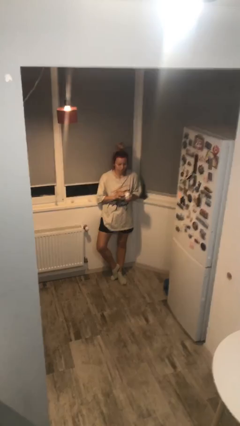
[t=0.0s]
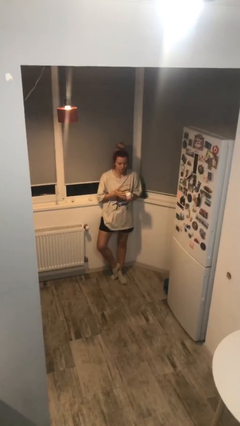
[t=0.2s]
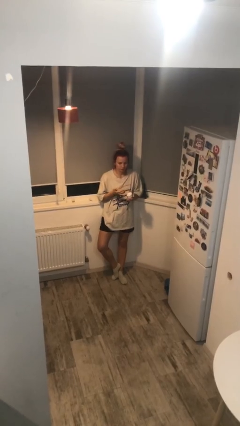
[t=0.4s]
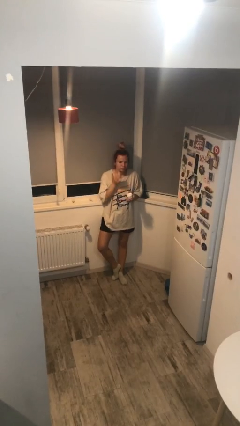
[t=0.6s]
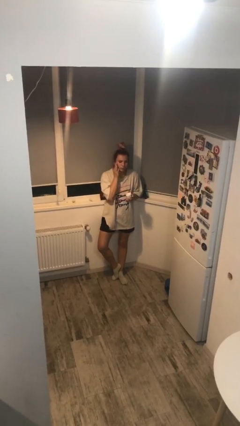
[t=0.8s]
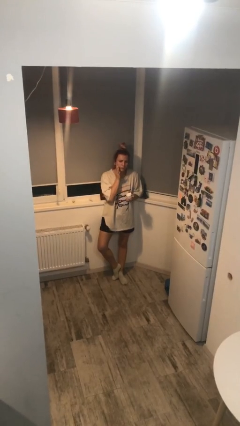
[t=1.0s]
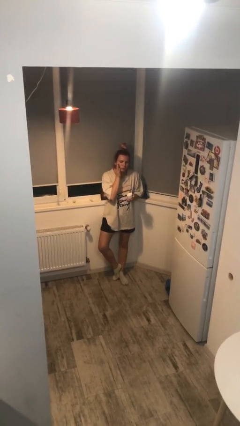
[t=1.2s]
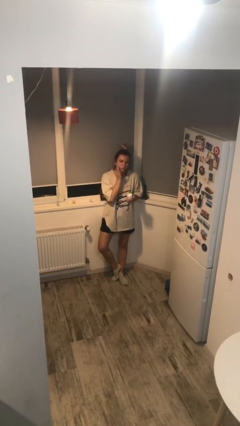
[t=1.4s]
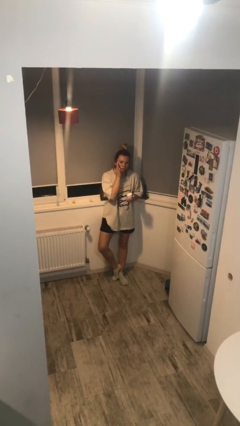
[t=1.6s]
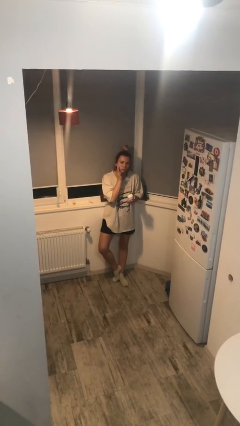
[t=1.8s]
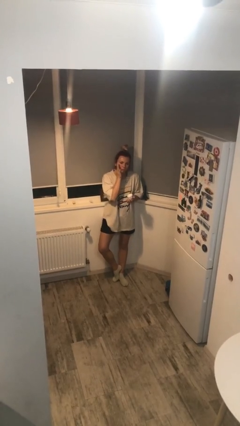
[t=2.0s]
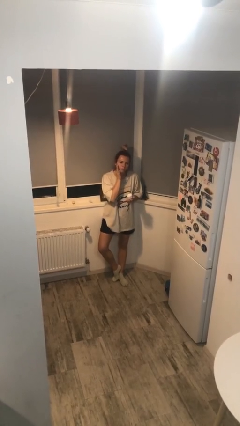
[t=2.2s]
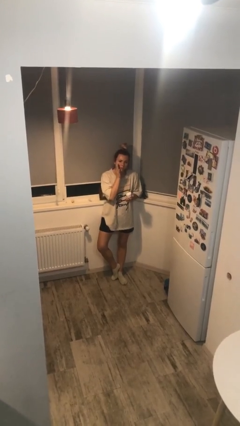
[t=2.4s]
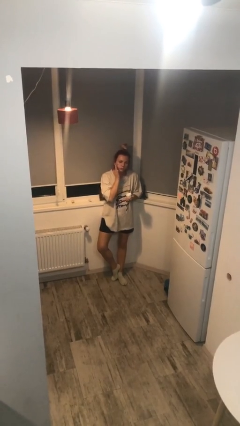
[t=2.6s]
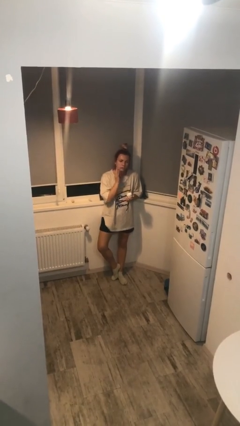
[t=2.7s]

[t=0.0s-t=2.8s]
person applies facial moisturizer

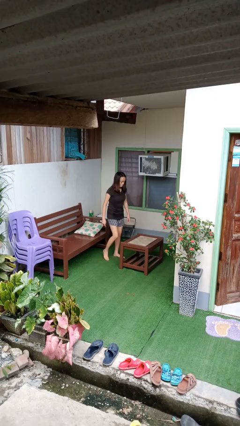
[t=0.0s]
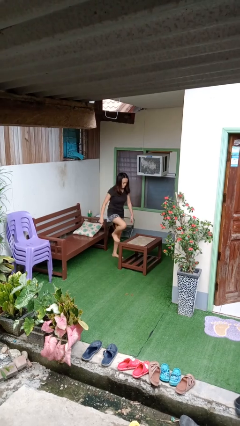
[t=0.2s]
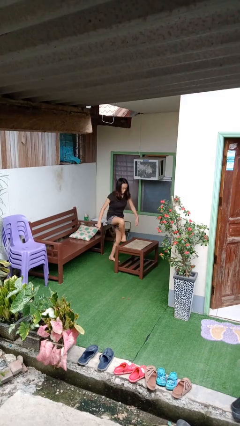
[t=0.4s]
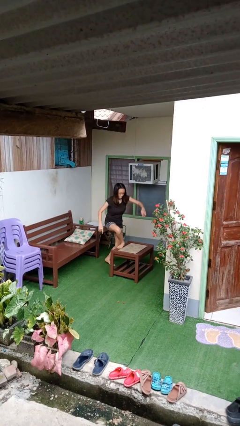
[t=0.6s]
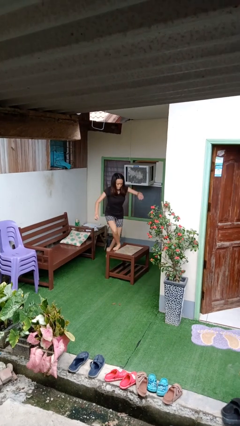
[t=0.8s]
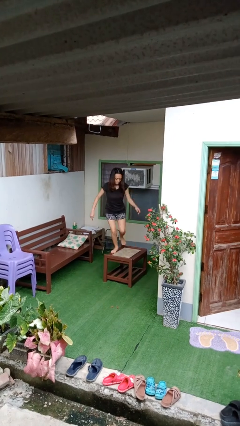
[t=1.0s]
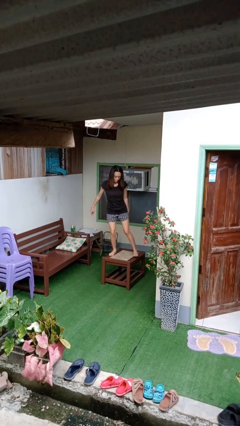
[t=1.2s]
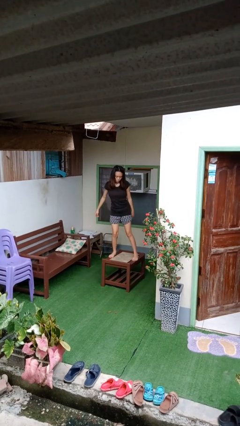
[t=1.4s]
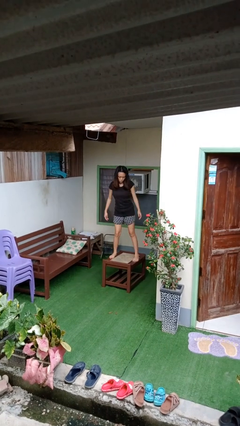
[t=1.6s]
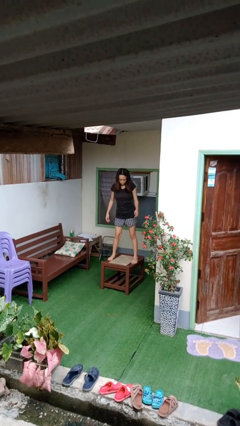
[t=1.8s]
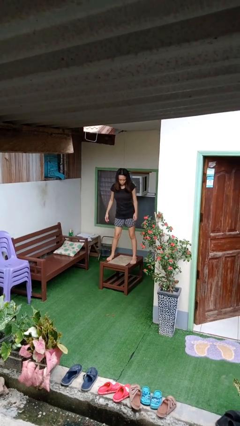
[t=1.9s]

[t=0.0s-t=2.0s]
person climbs on table

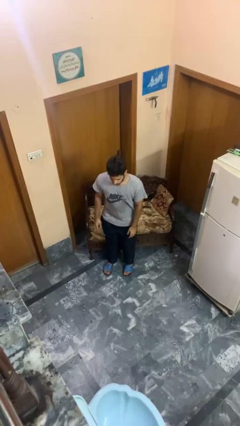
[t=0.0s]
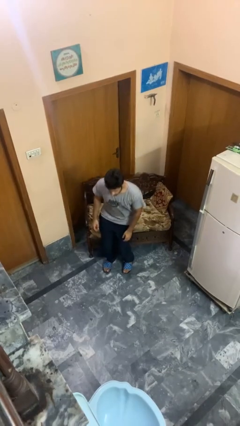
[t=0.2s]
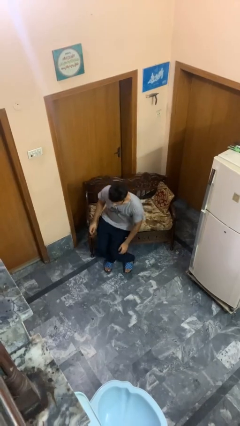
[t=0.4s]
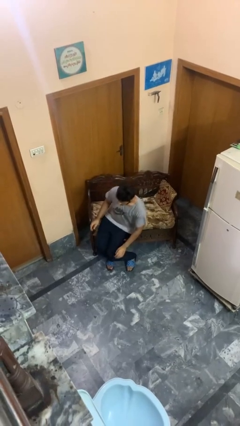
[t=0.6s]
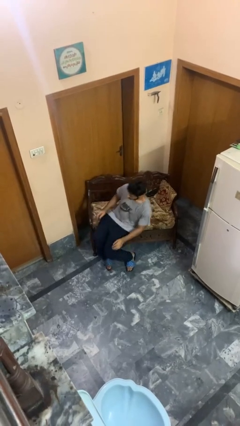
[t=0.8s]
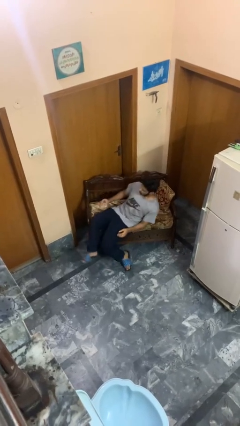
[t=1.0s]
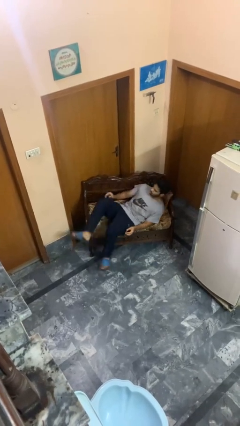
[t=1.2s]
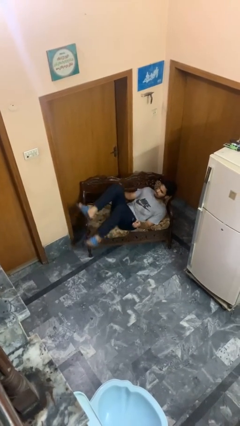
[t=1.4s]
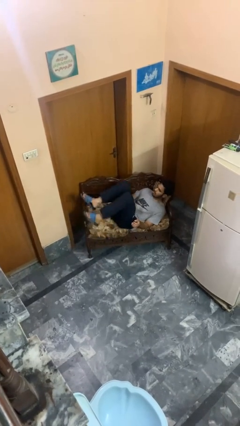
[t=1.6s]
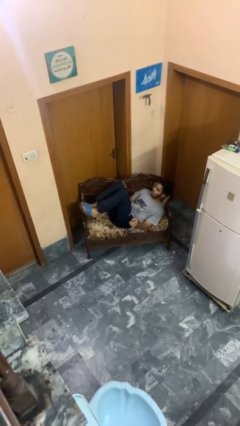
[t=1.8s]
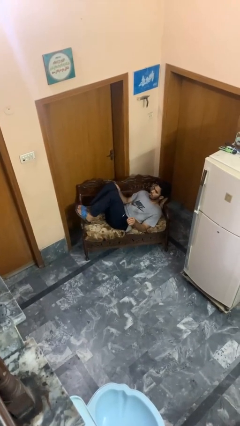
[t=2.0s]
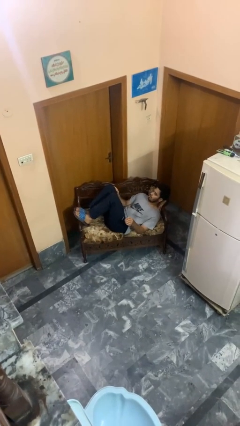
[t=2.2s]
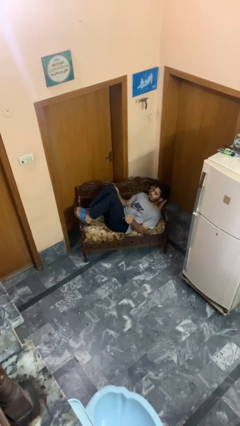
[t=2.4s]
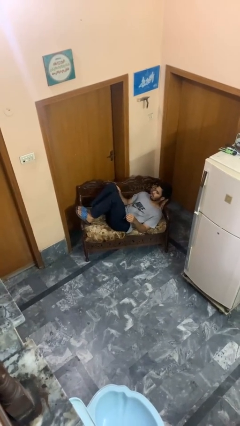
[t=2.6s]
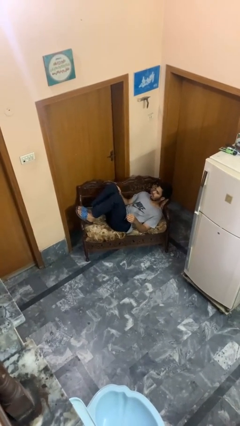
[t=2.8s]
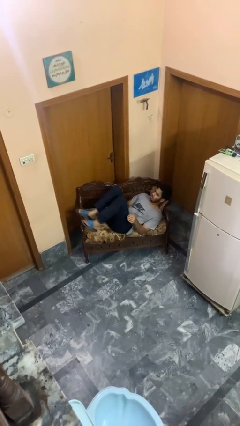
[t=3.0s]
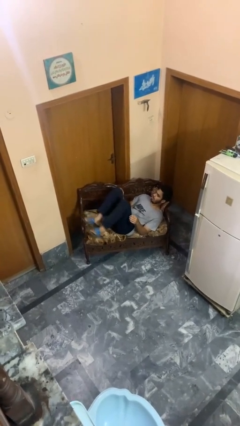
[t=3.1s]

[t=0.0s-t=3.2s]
person lies down on couch

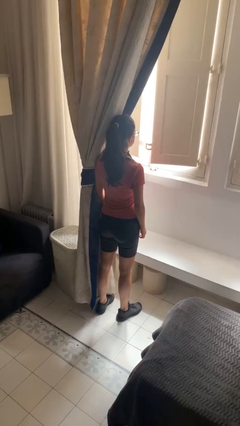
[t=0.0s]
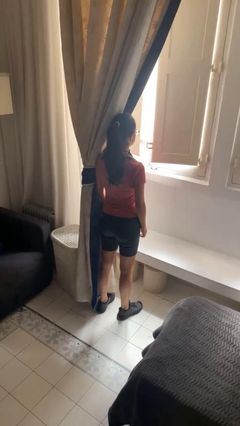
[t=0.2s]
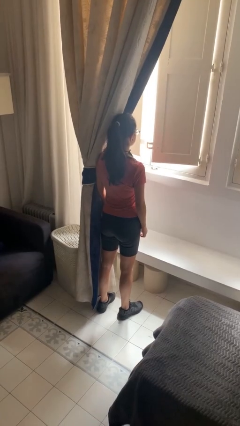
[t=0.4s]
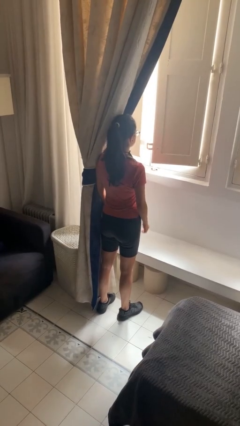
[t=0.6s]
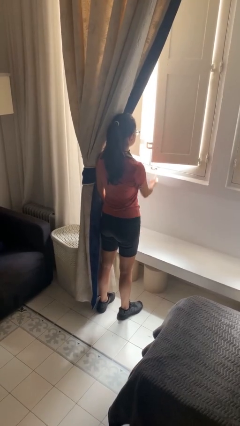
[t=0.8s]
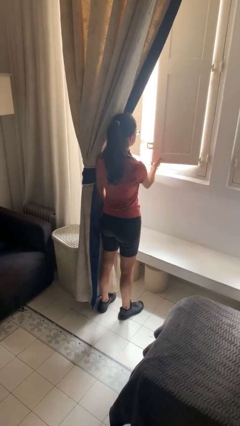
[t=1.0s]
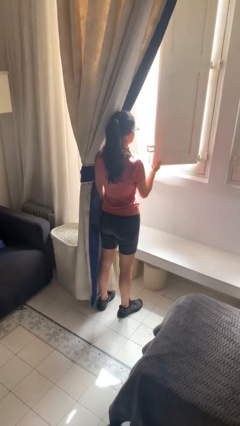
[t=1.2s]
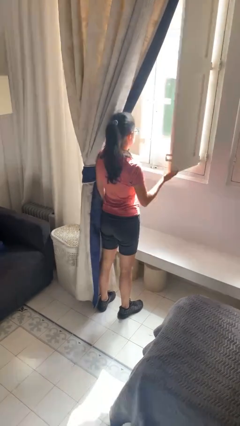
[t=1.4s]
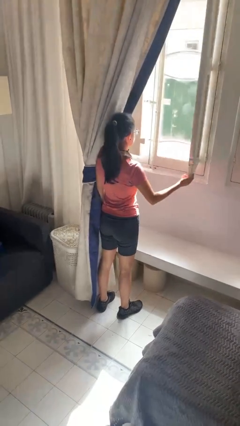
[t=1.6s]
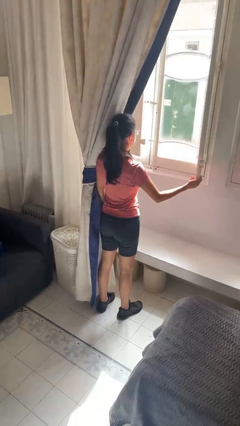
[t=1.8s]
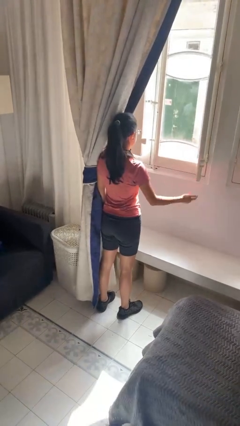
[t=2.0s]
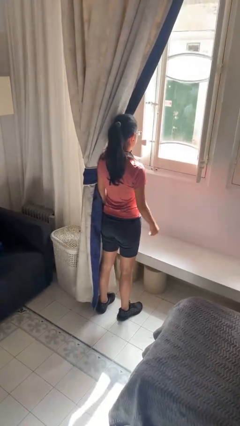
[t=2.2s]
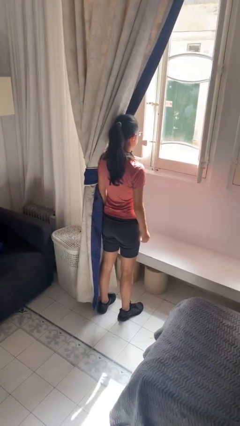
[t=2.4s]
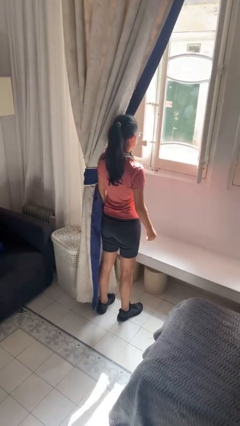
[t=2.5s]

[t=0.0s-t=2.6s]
person opens home window

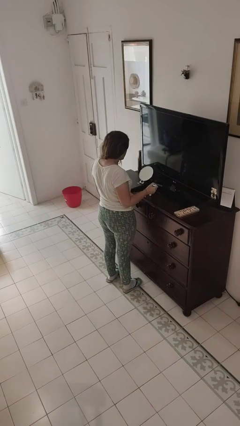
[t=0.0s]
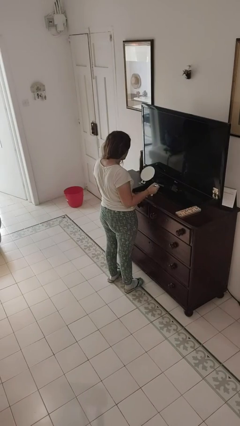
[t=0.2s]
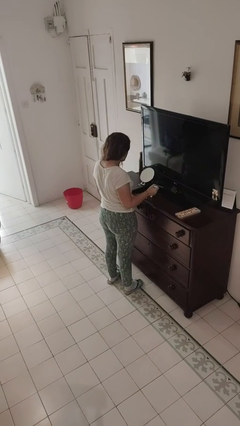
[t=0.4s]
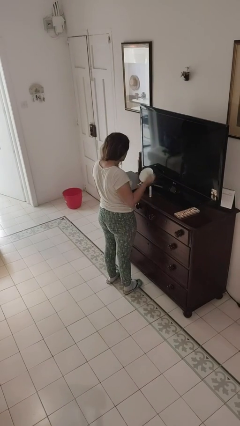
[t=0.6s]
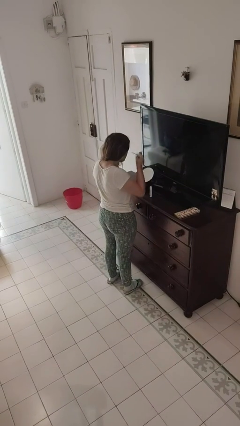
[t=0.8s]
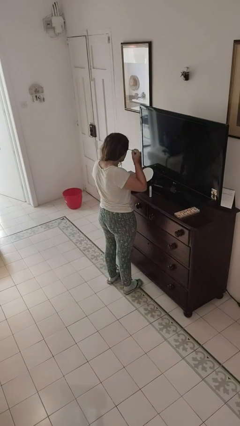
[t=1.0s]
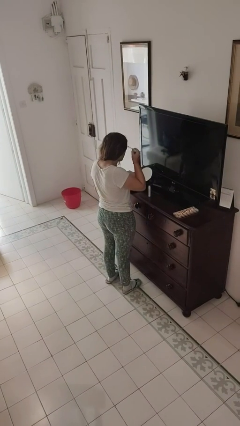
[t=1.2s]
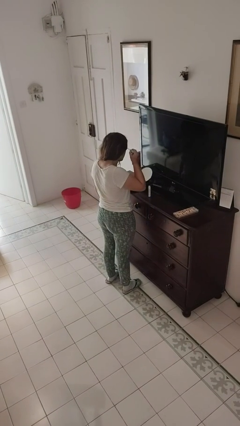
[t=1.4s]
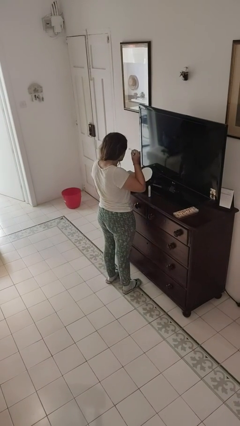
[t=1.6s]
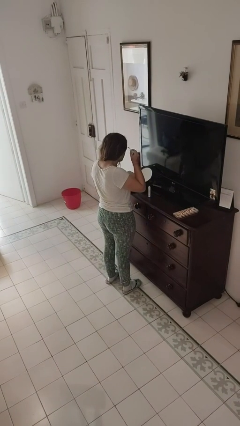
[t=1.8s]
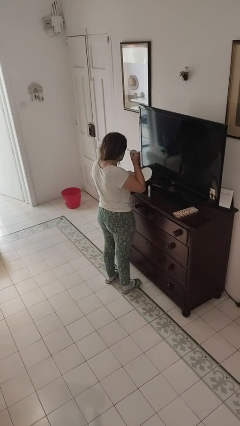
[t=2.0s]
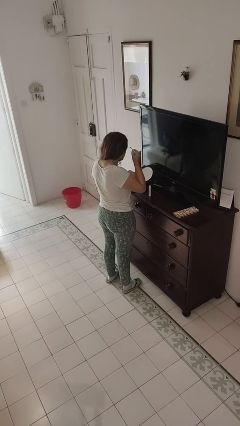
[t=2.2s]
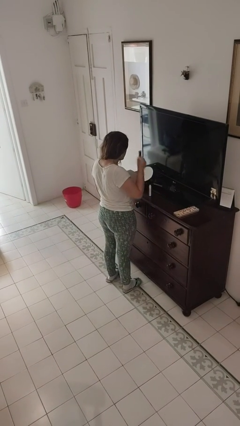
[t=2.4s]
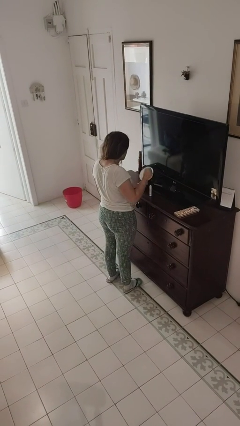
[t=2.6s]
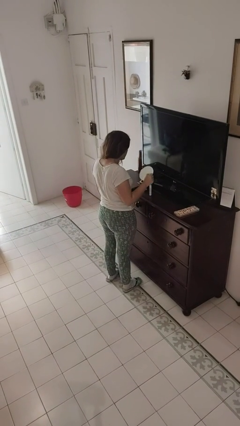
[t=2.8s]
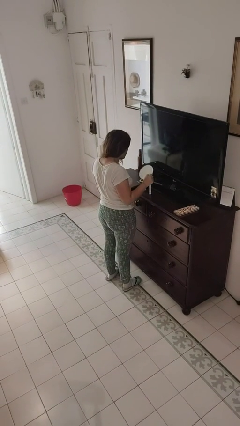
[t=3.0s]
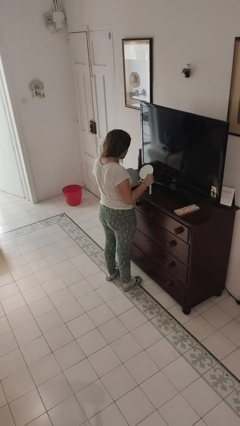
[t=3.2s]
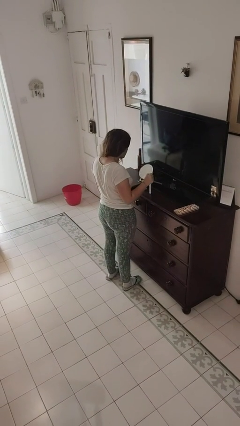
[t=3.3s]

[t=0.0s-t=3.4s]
person applies eye makeup

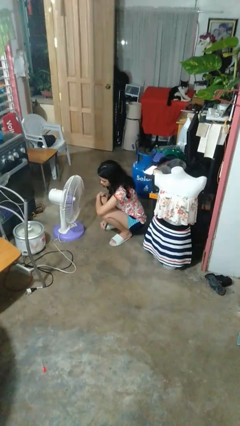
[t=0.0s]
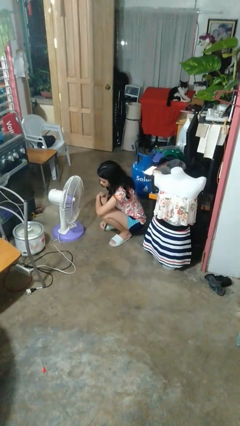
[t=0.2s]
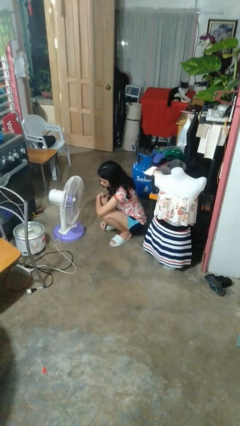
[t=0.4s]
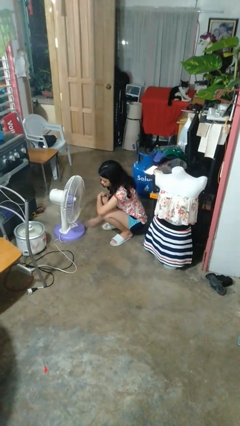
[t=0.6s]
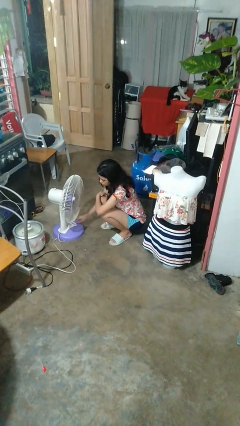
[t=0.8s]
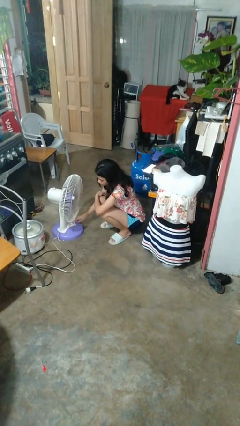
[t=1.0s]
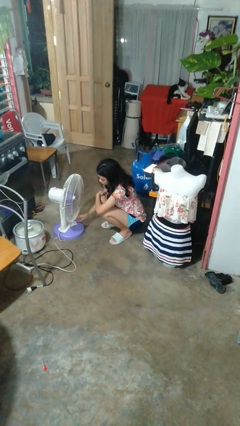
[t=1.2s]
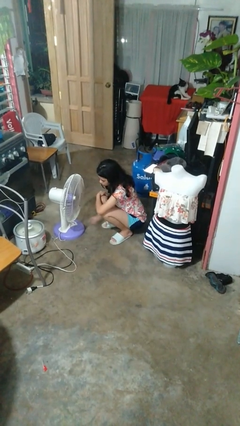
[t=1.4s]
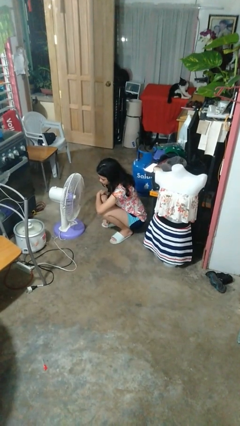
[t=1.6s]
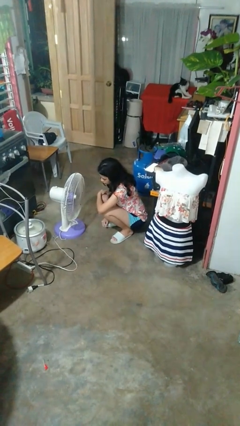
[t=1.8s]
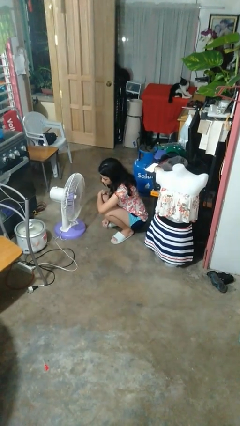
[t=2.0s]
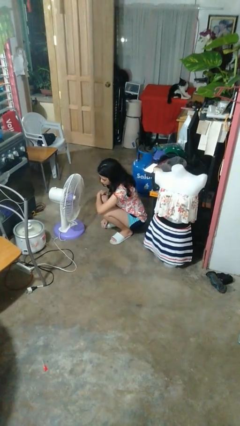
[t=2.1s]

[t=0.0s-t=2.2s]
person turns on fan

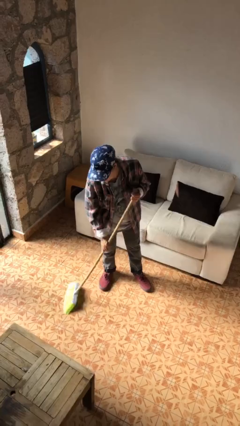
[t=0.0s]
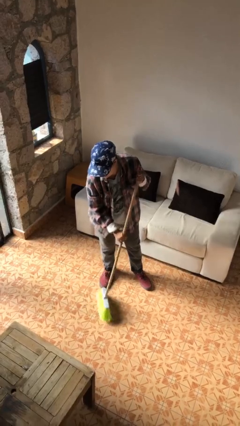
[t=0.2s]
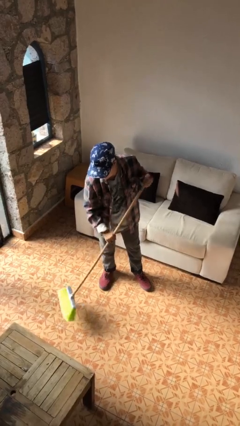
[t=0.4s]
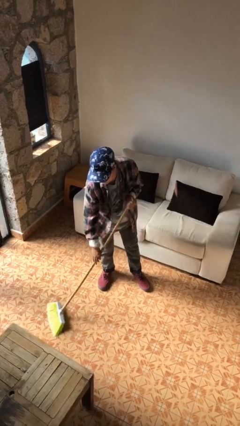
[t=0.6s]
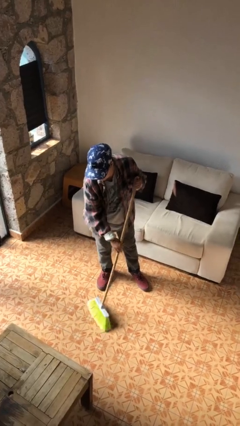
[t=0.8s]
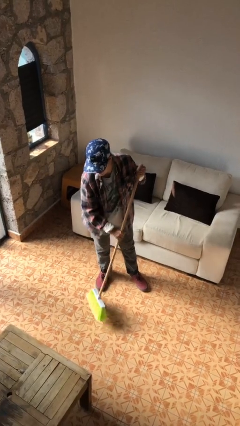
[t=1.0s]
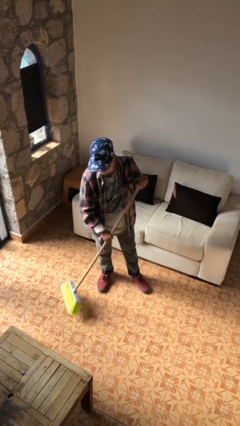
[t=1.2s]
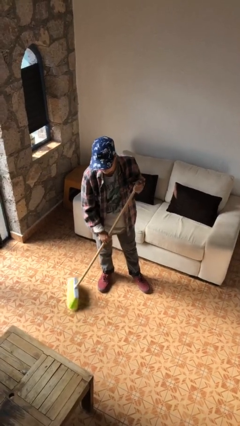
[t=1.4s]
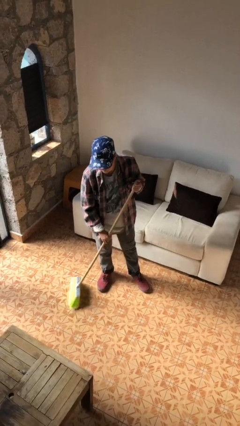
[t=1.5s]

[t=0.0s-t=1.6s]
person sweeps floor
